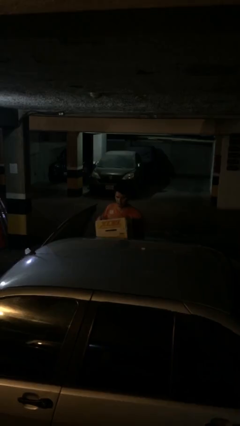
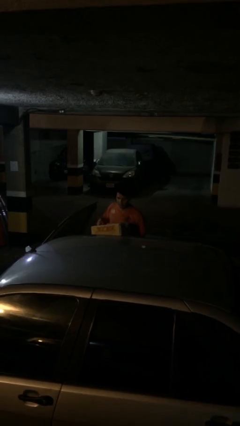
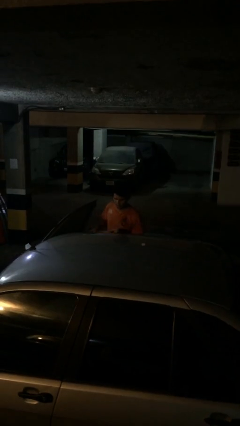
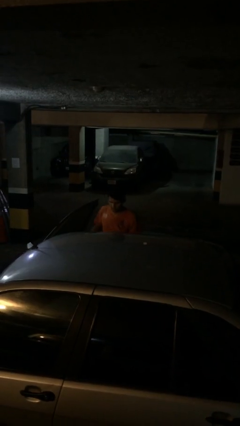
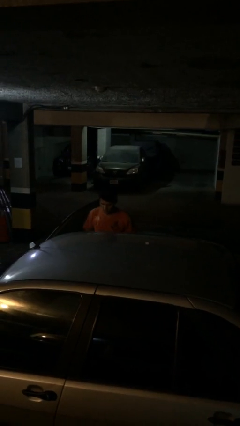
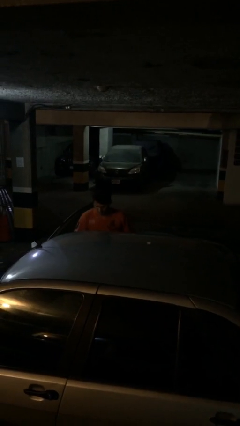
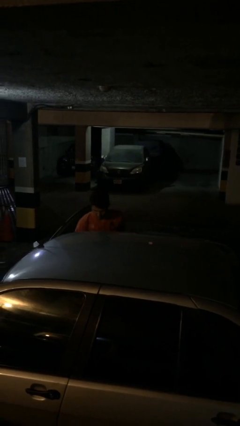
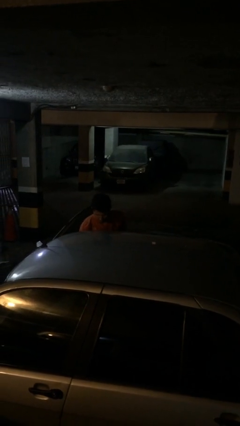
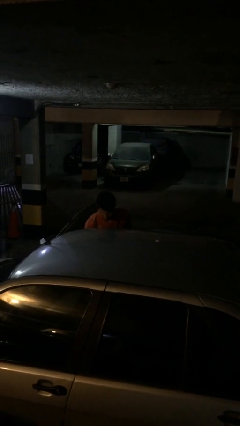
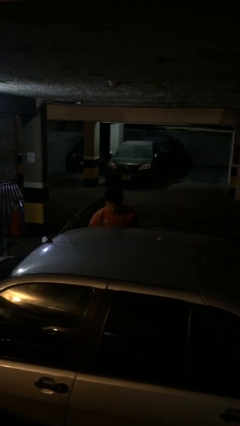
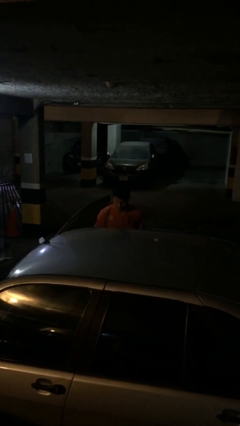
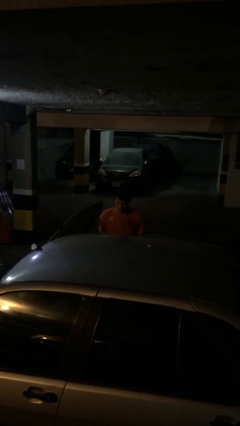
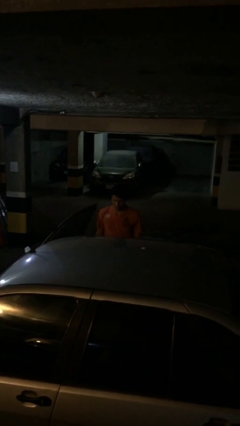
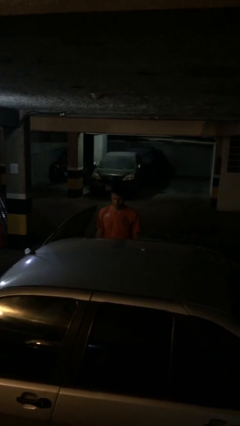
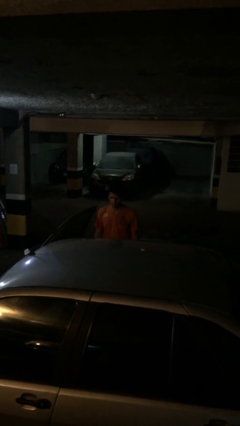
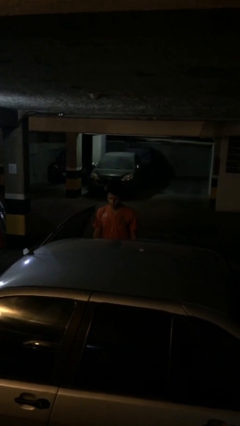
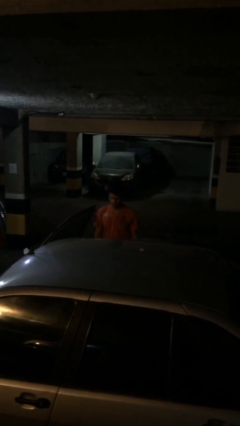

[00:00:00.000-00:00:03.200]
person loads car

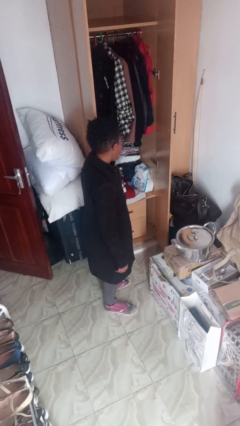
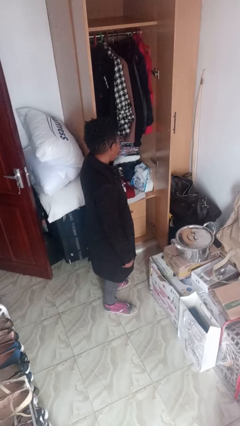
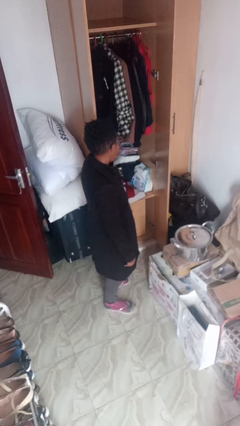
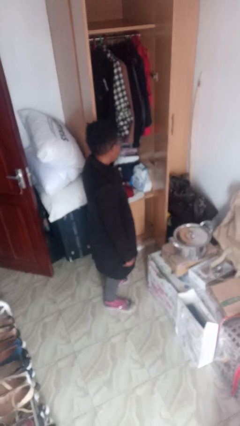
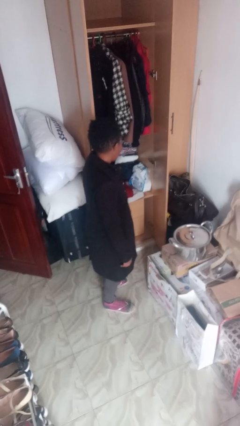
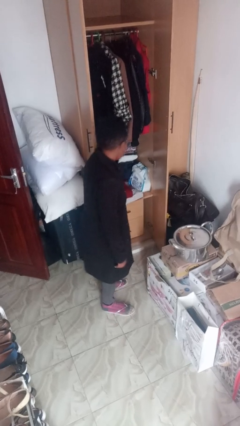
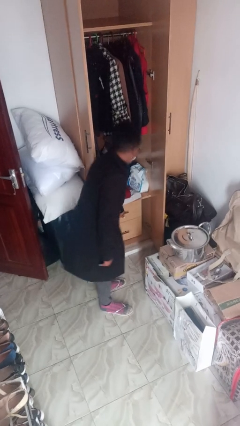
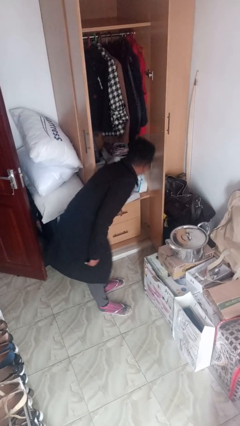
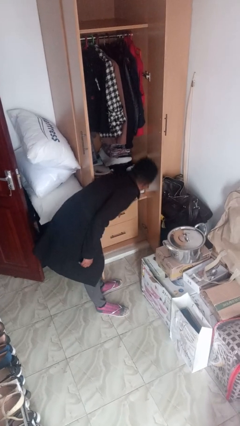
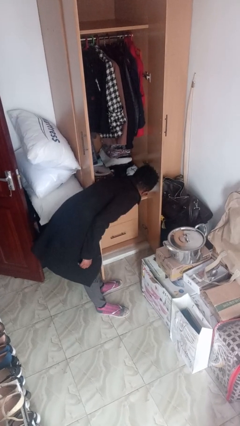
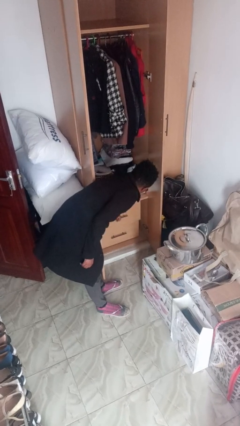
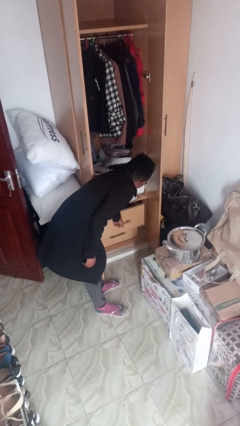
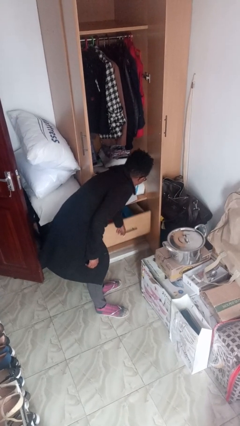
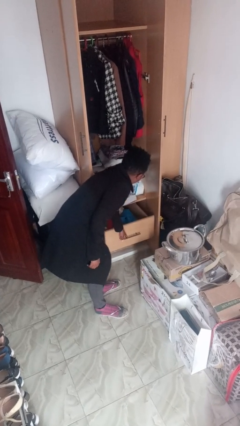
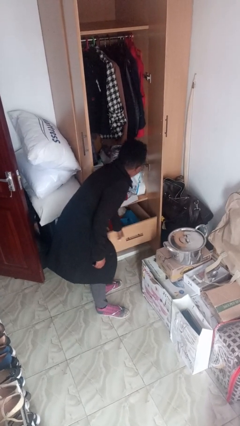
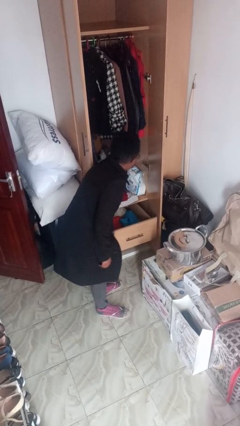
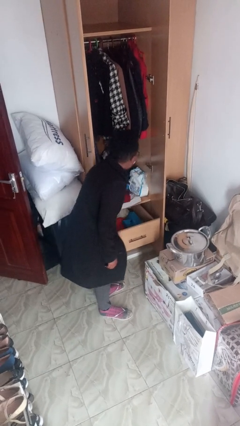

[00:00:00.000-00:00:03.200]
person opens dresser drawer

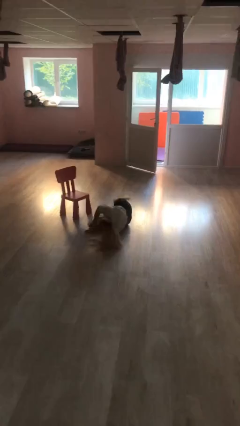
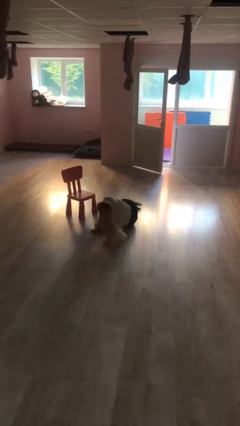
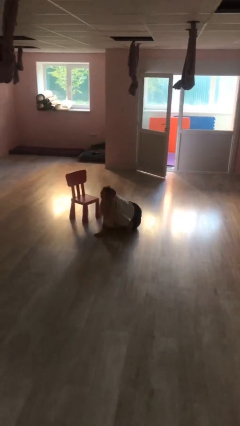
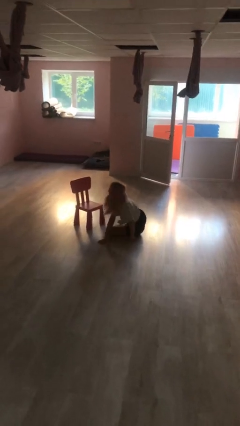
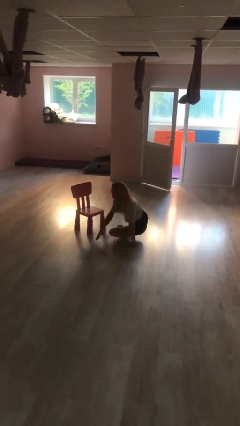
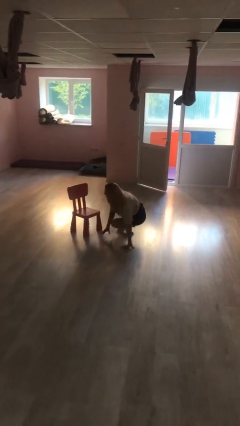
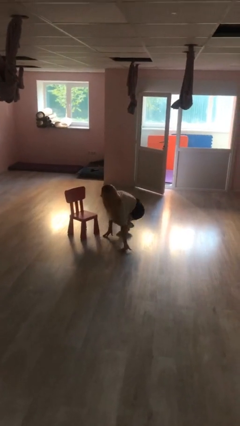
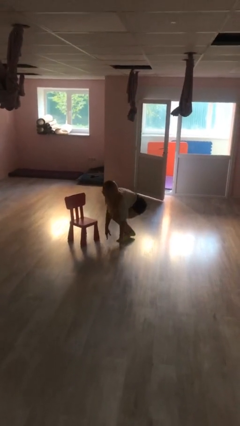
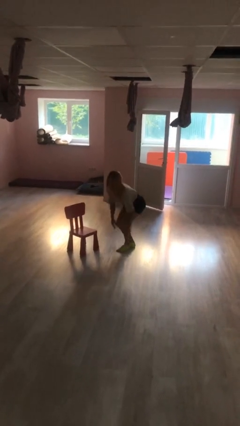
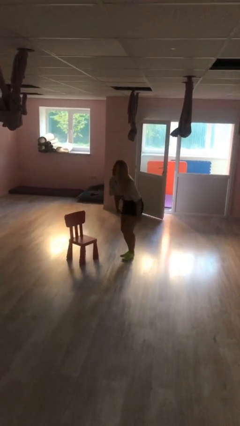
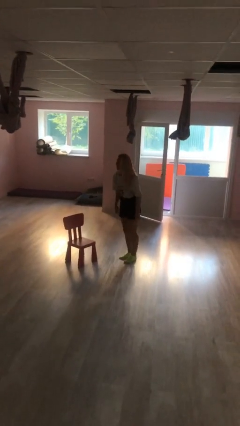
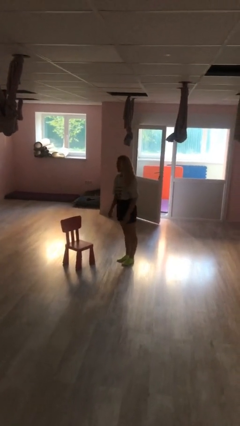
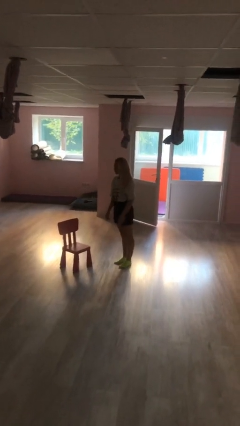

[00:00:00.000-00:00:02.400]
person stands up from floor

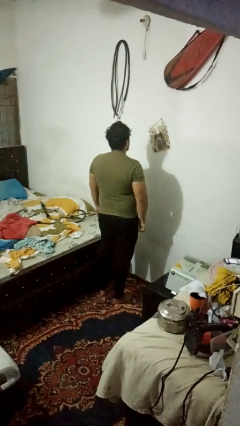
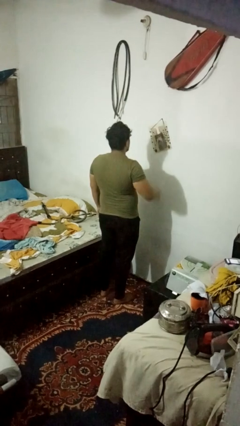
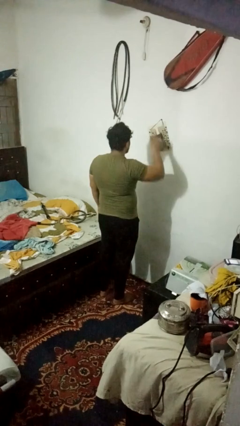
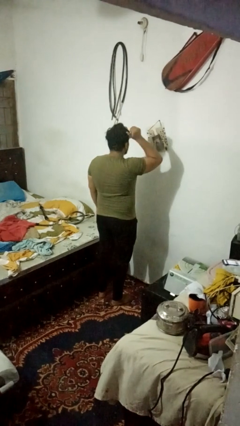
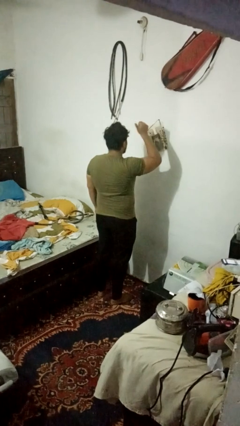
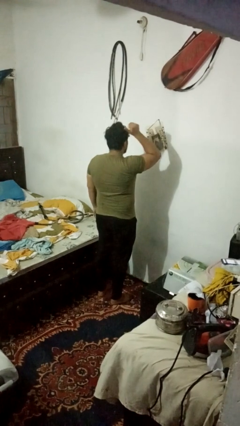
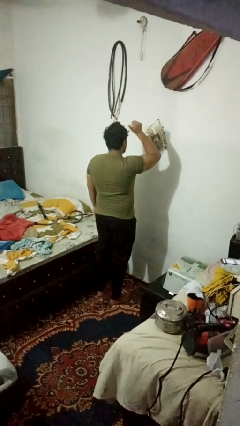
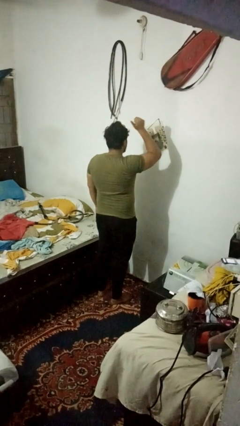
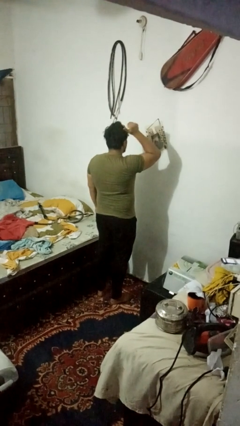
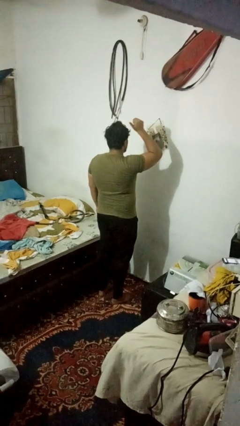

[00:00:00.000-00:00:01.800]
person gestures behind me

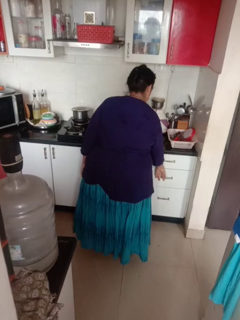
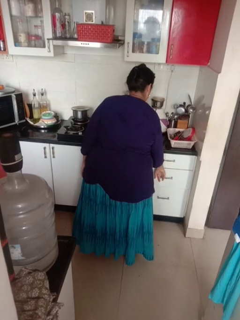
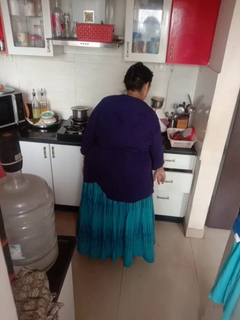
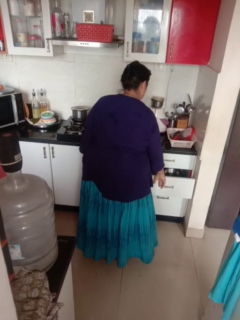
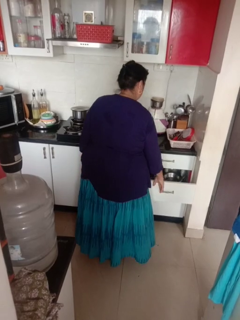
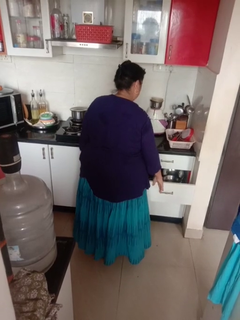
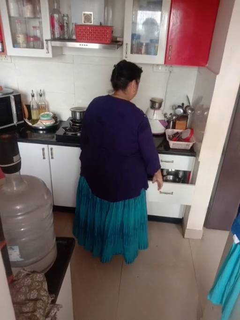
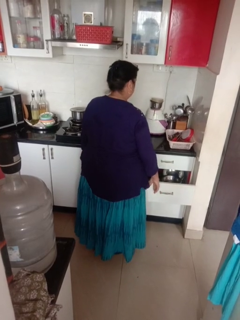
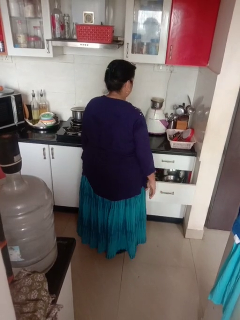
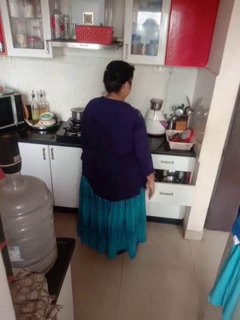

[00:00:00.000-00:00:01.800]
person opens kitchen drawer

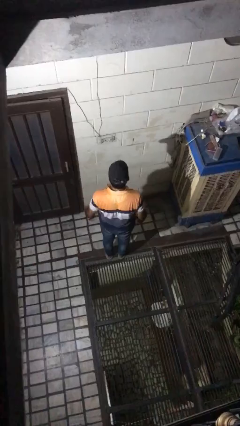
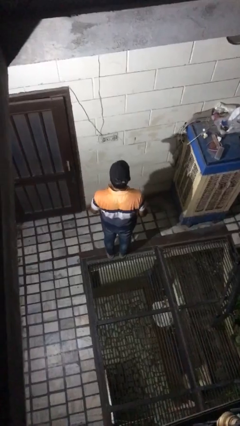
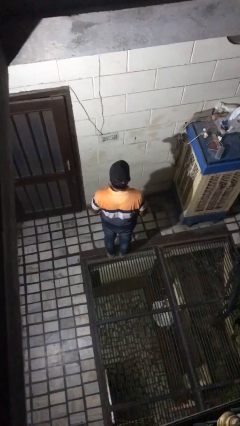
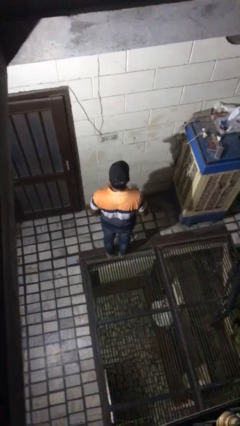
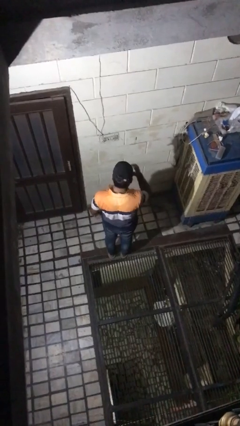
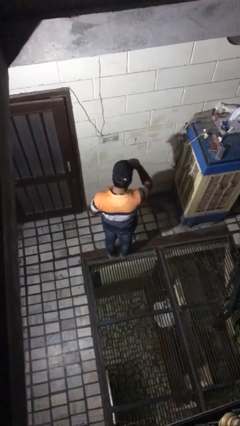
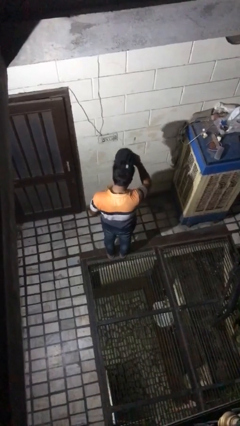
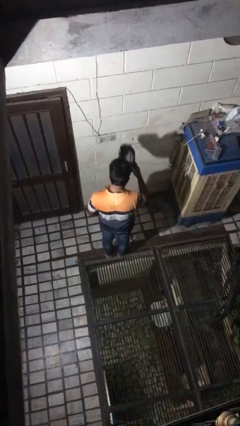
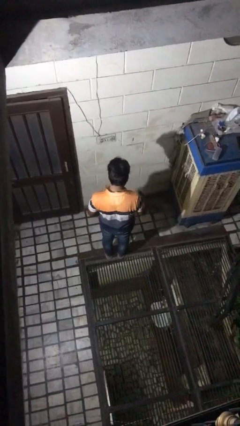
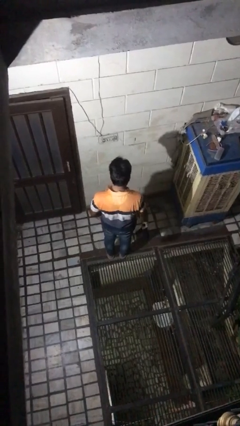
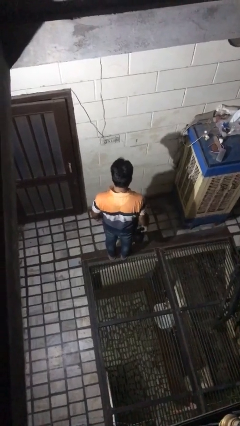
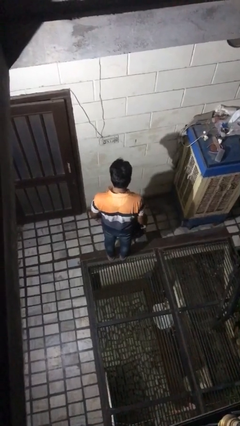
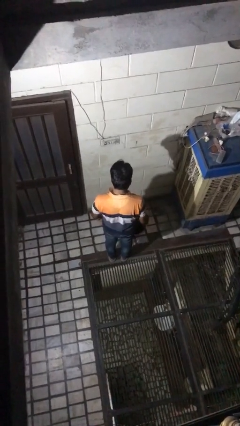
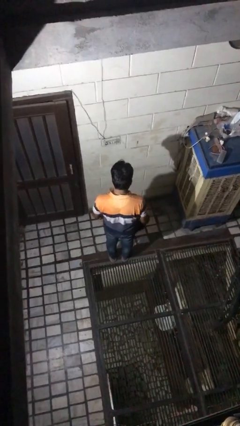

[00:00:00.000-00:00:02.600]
person takes off hat

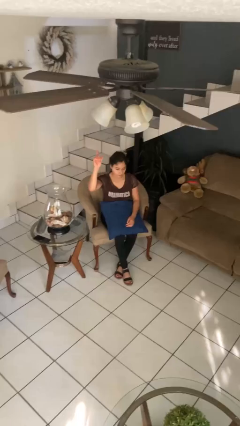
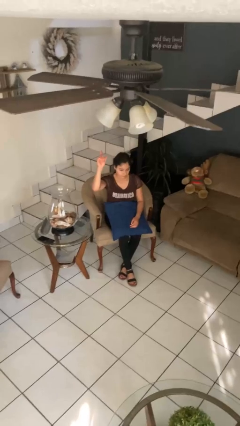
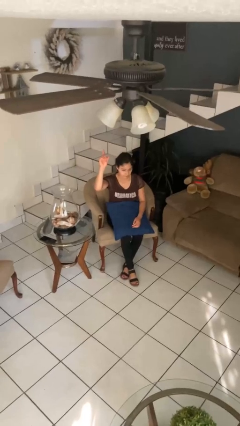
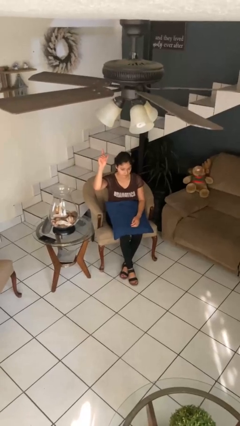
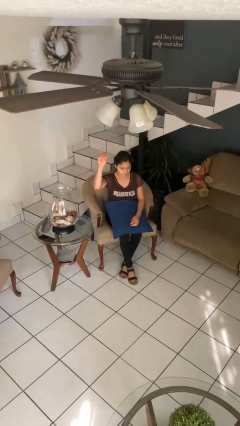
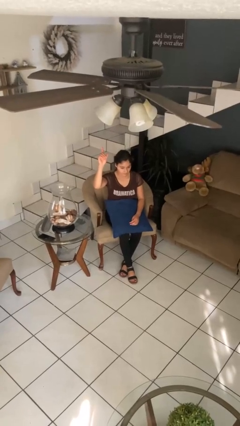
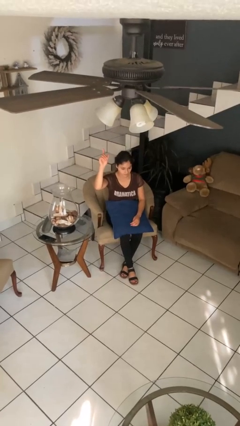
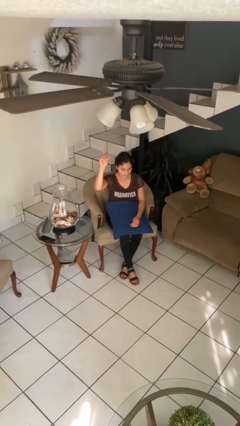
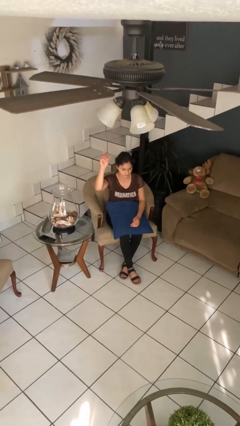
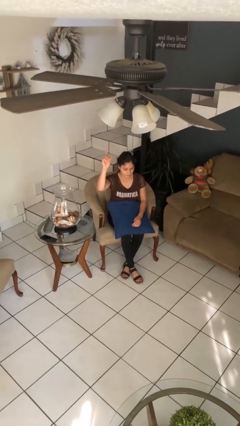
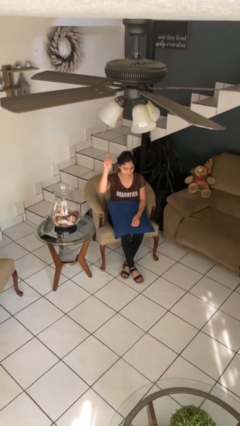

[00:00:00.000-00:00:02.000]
person gestures raise hand

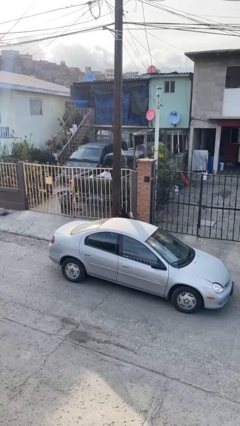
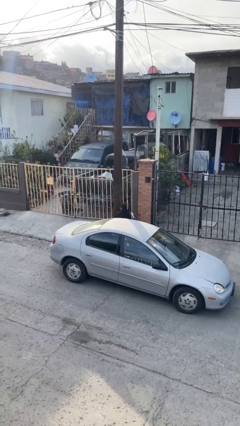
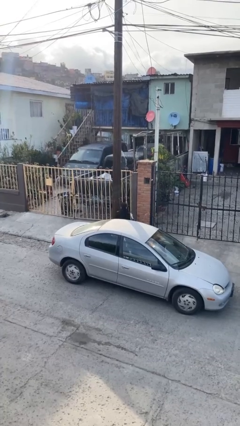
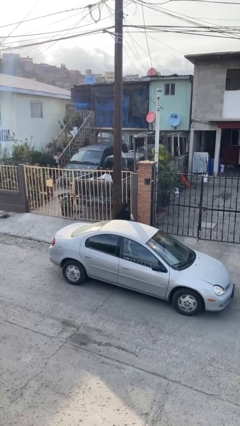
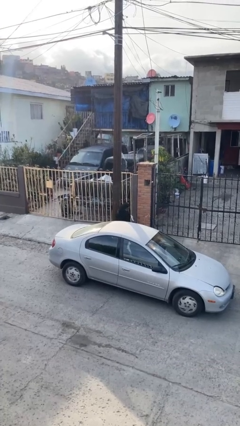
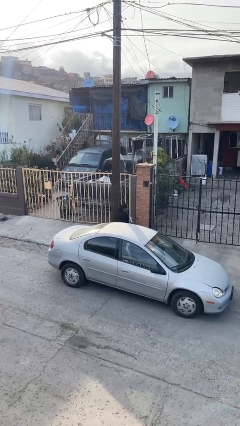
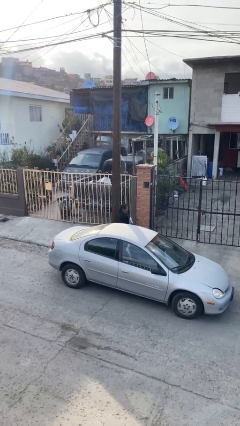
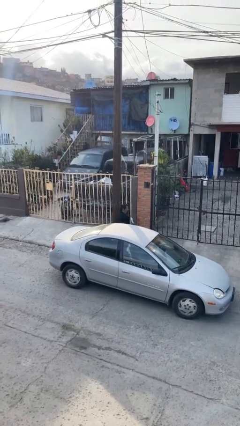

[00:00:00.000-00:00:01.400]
person exits car
